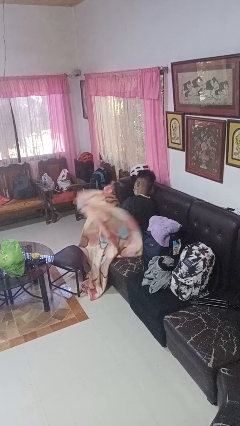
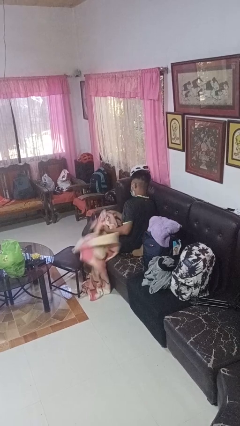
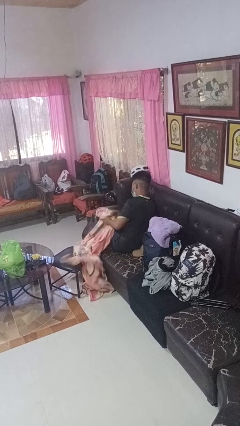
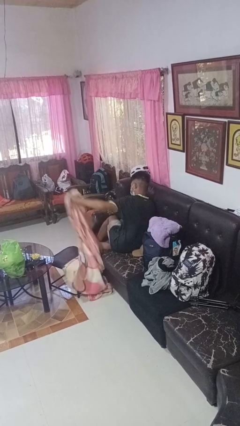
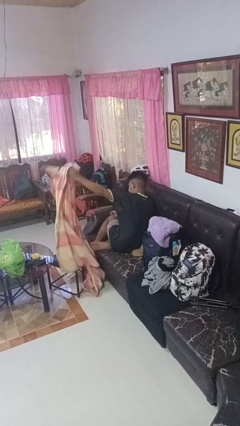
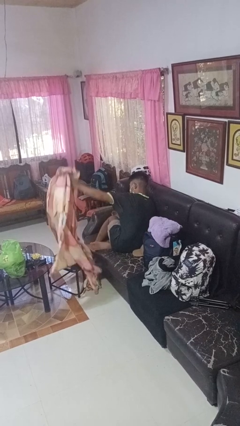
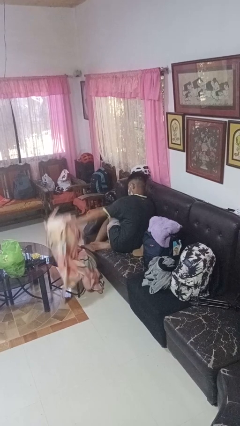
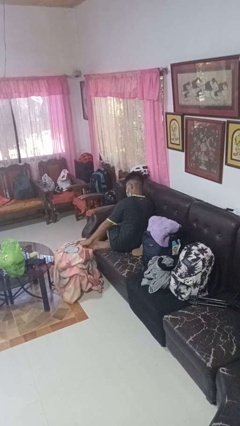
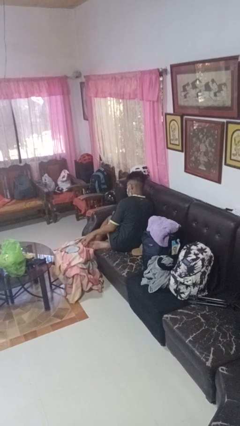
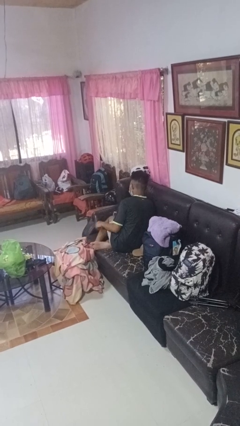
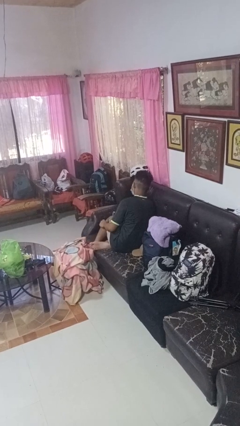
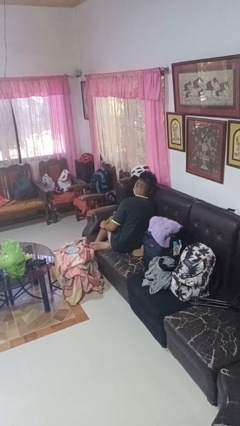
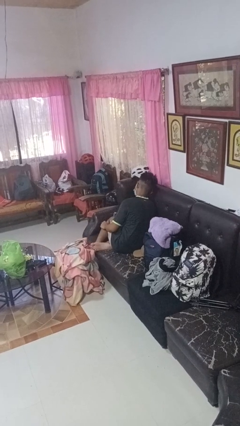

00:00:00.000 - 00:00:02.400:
person uncovers with blanket

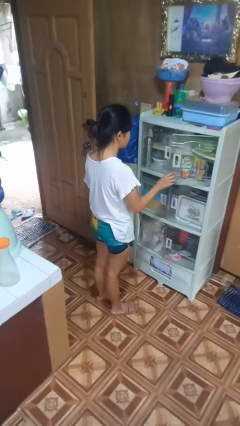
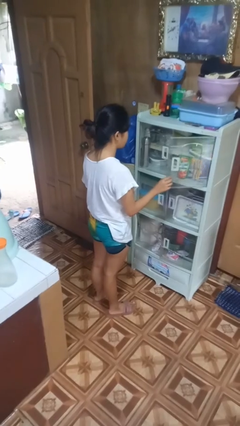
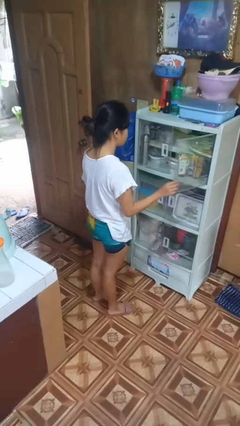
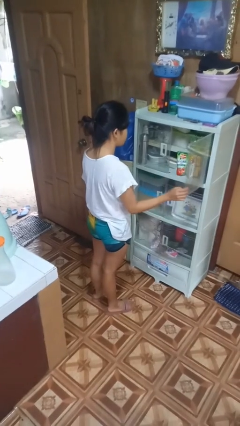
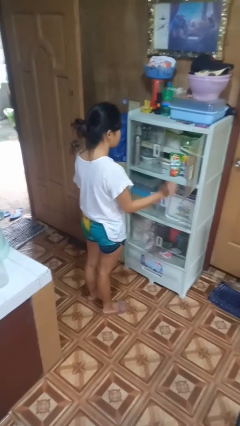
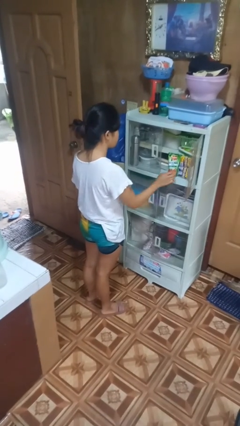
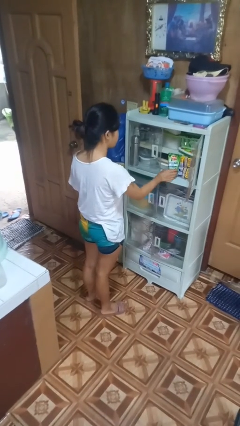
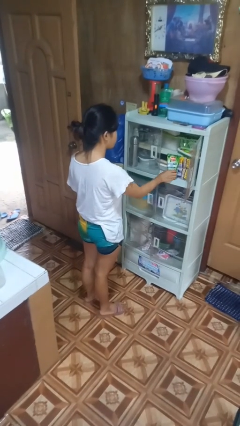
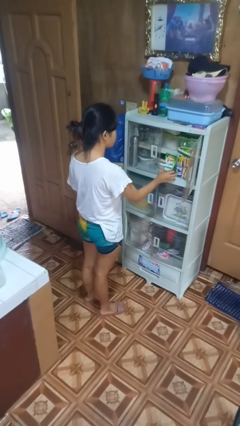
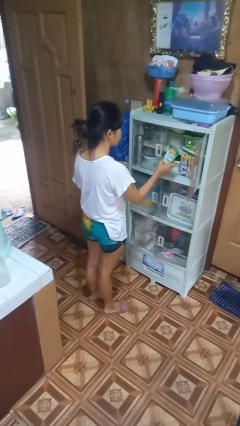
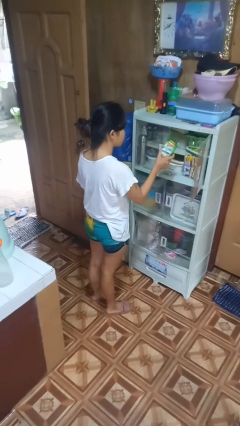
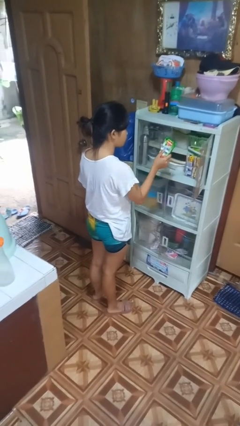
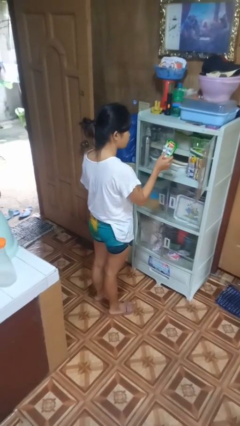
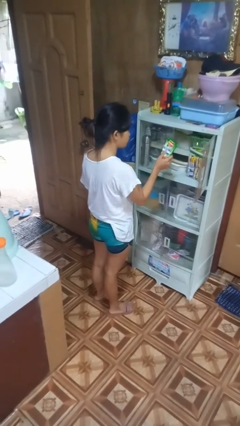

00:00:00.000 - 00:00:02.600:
person picks up object from cabinet

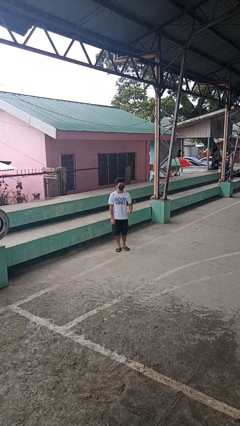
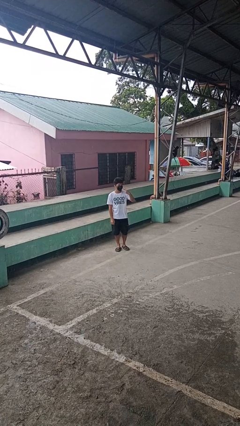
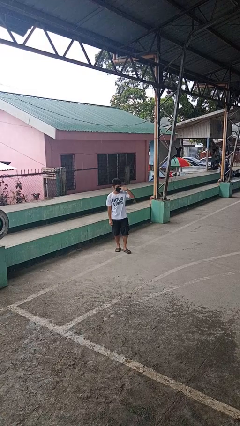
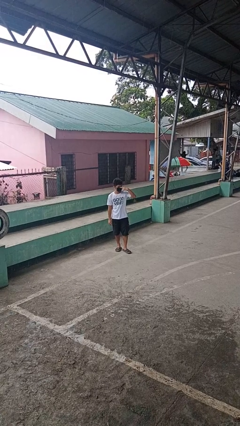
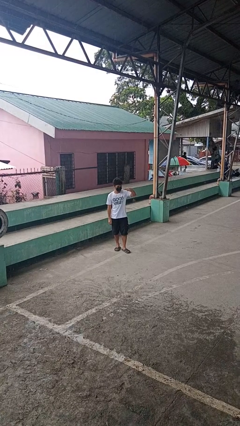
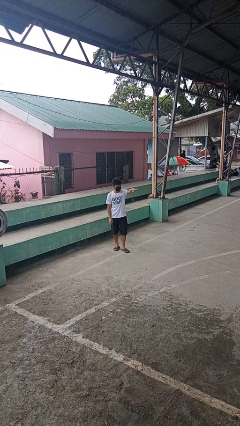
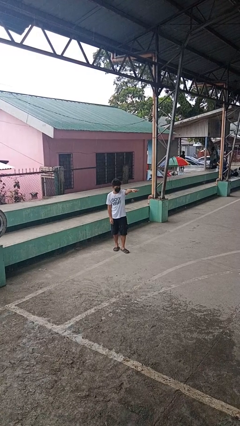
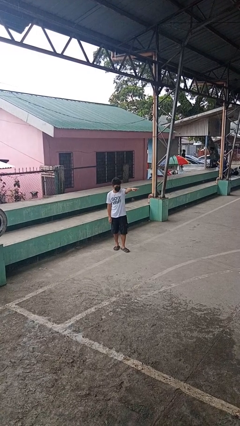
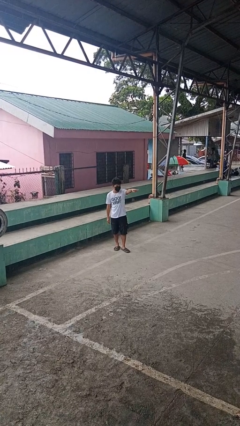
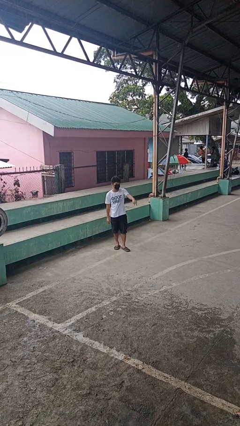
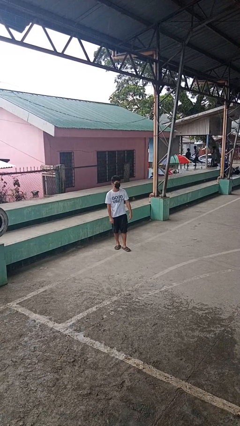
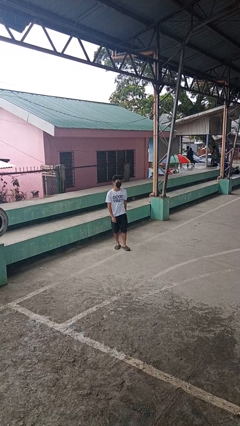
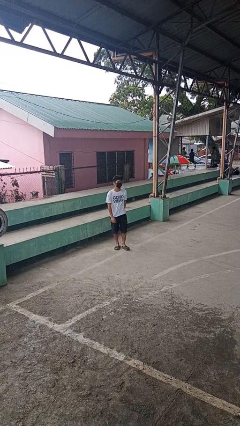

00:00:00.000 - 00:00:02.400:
person gestures watch closely

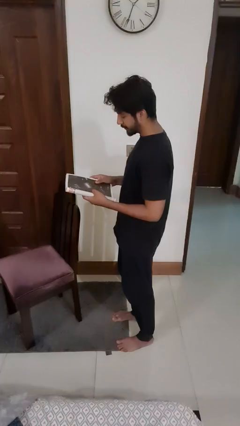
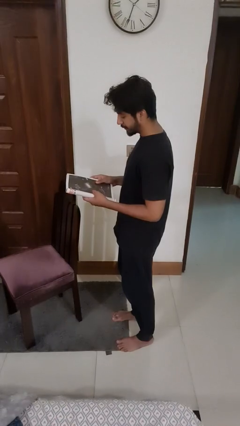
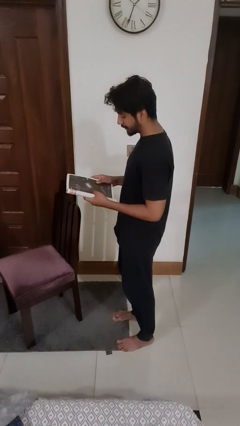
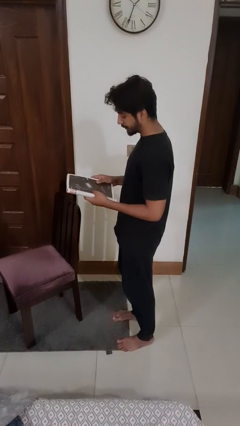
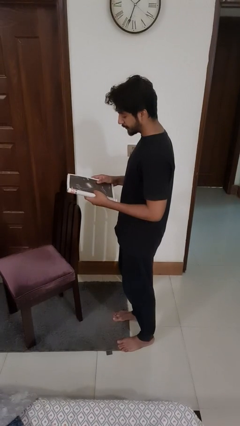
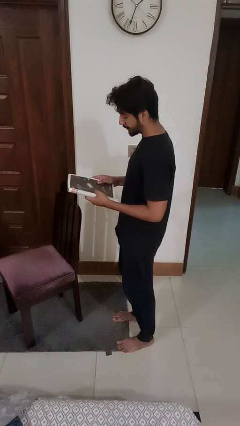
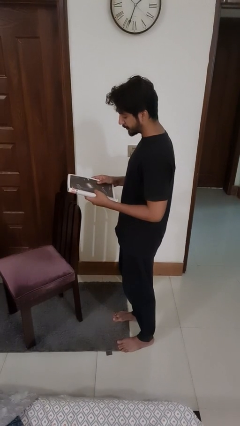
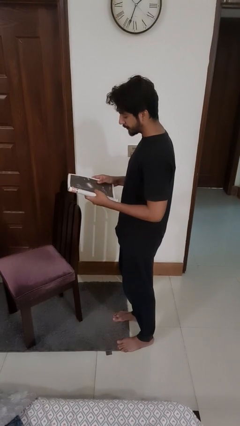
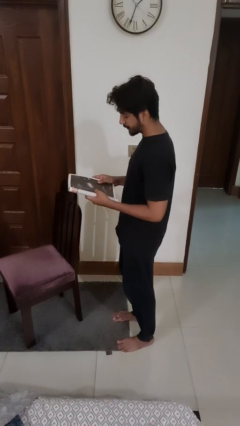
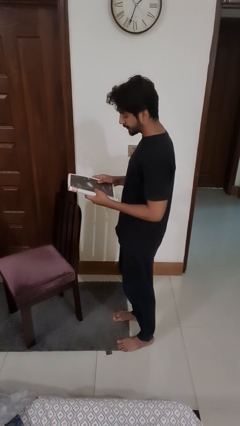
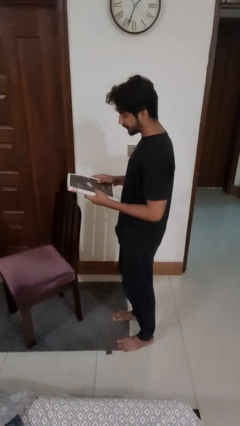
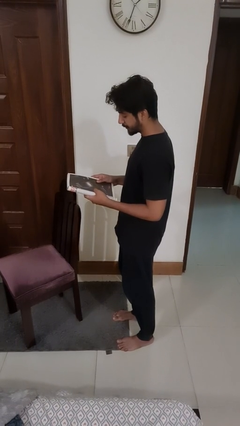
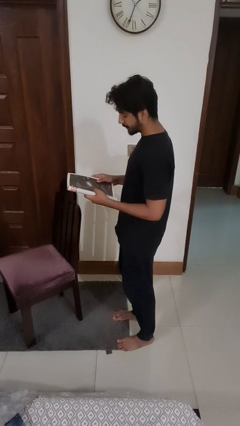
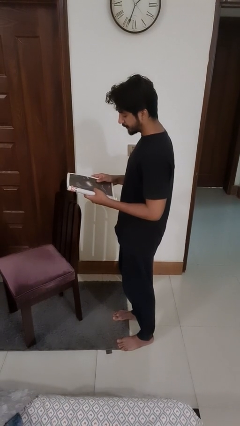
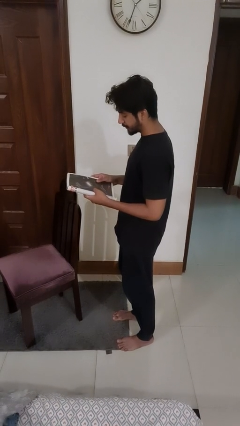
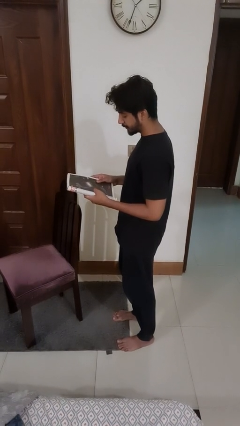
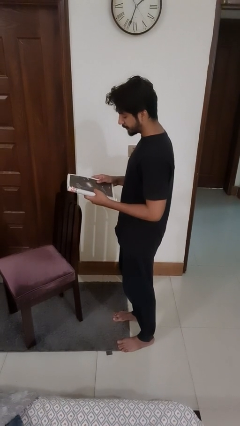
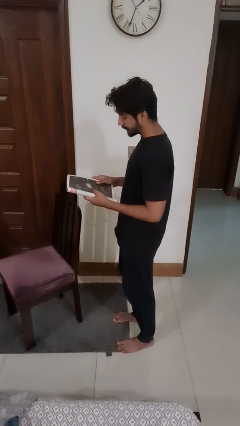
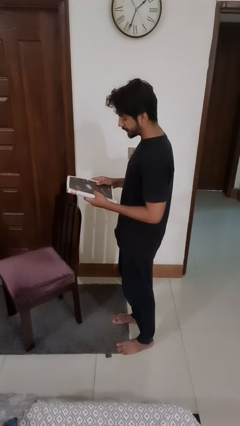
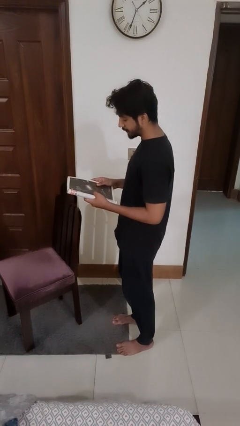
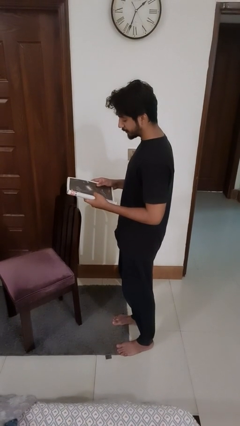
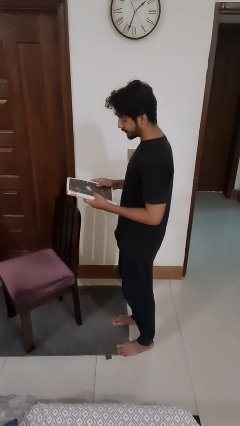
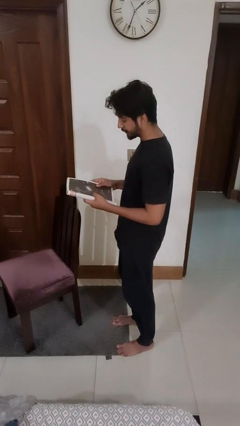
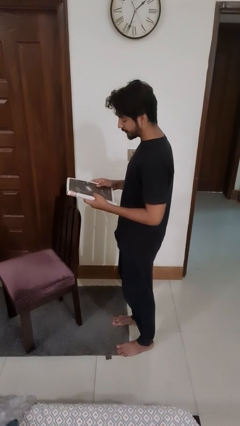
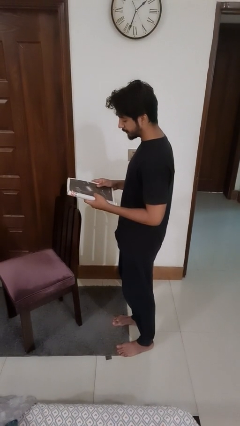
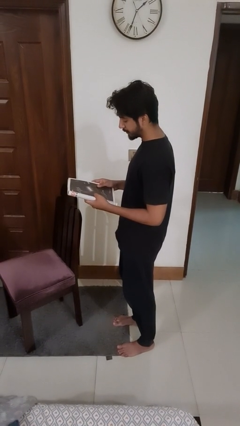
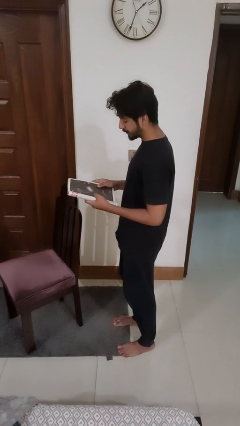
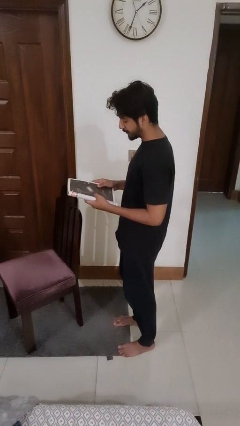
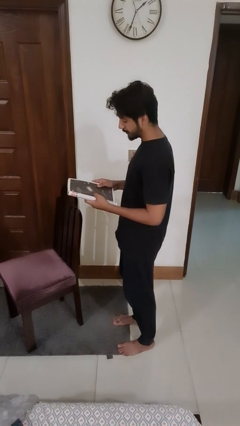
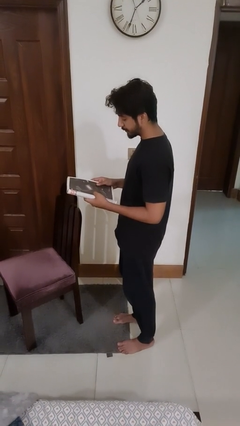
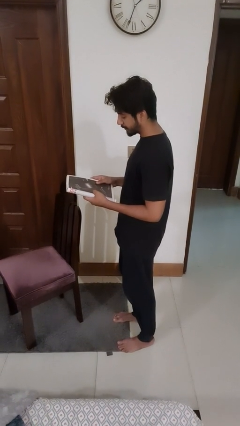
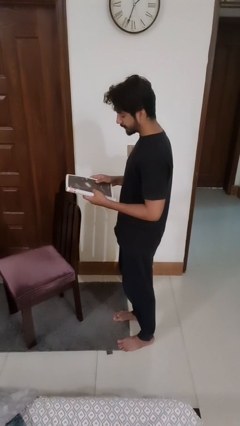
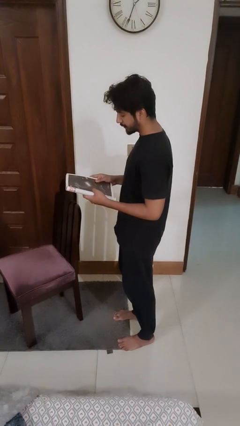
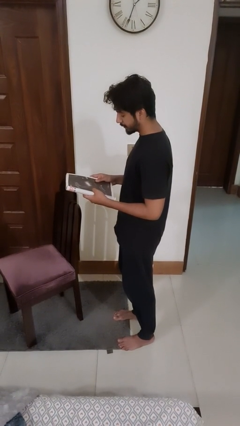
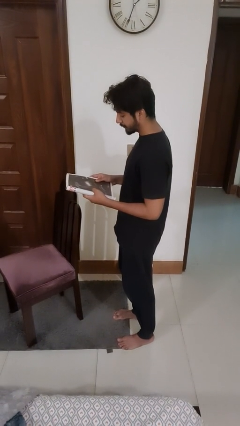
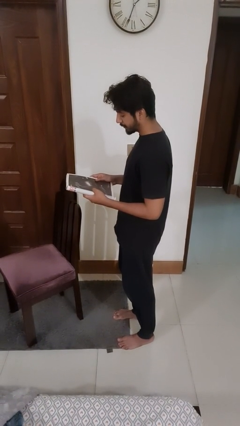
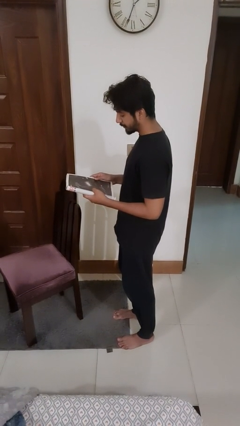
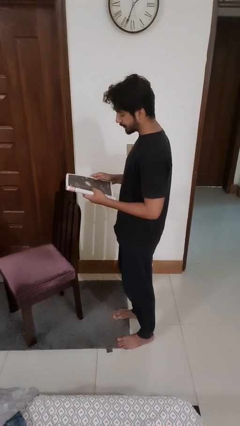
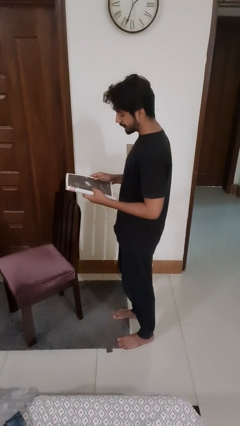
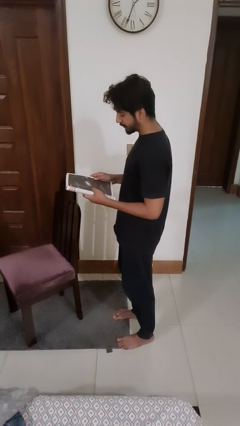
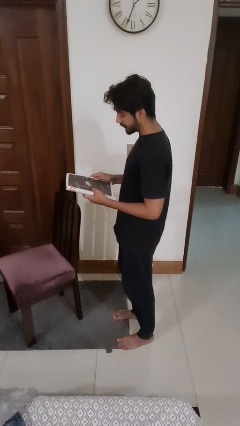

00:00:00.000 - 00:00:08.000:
person reads magazine

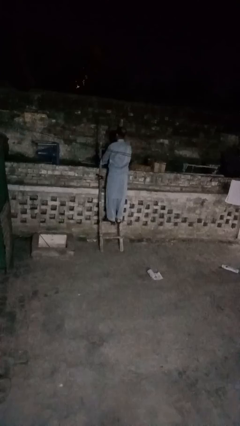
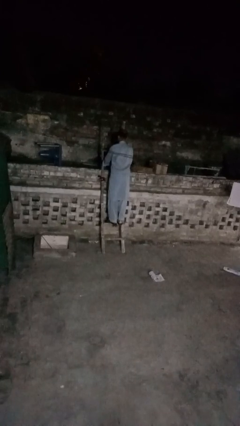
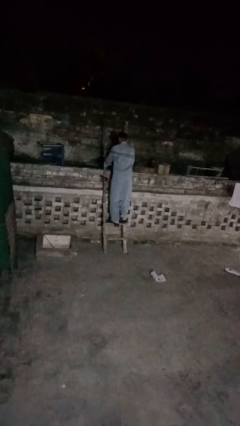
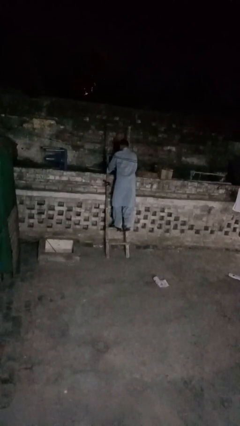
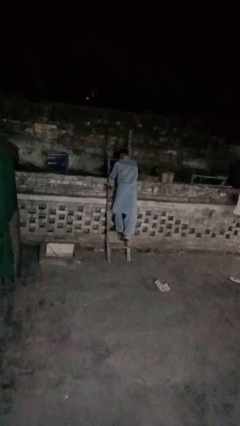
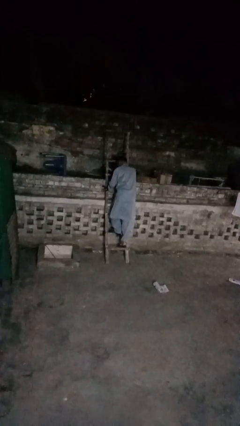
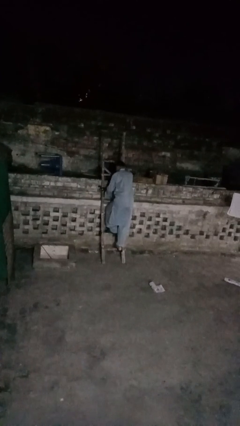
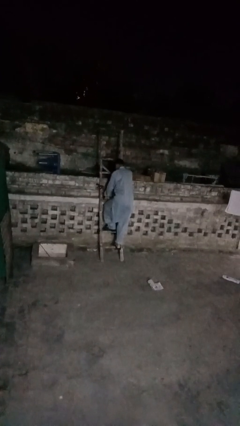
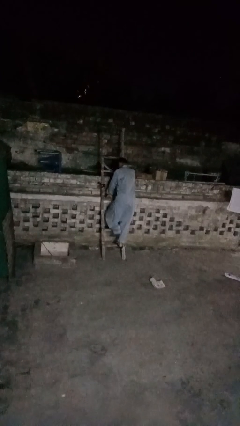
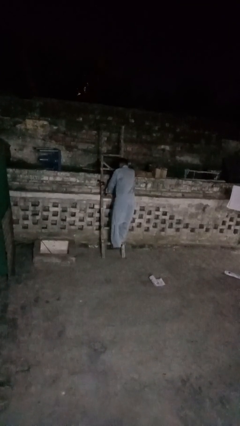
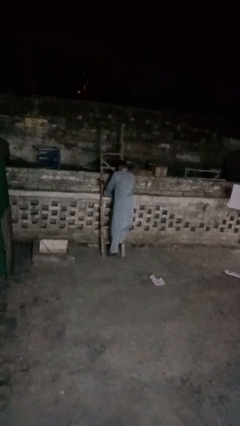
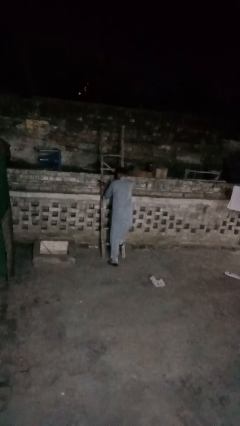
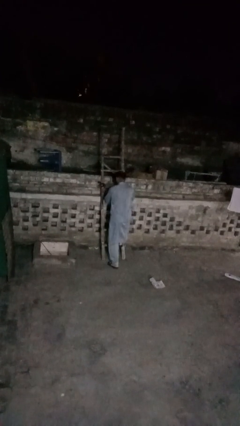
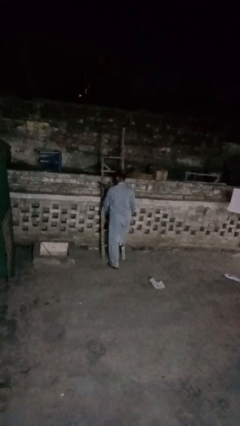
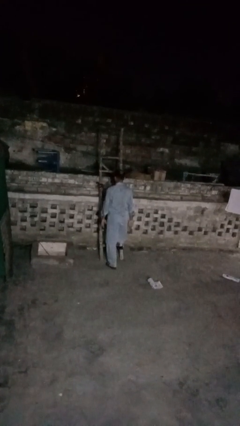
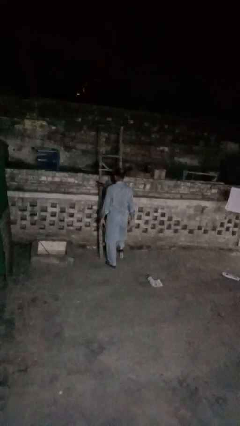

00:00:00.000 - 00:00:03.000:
person climbs down ladder
